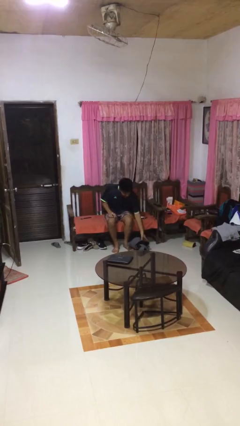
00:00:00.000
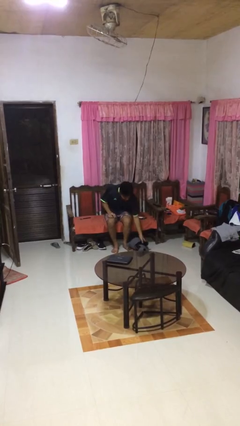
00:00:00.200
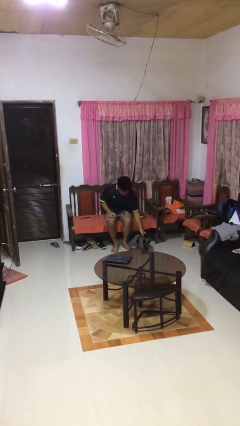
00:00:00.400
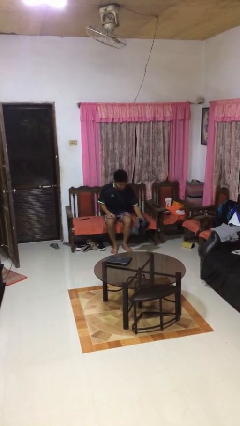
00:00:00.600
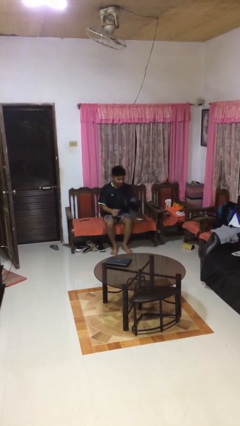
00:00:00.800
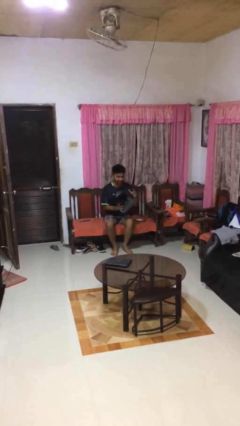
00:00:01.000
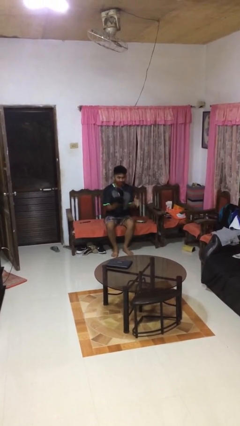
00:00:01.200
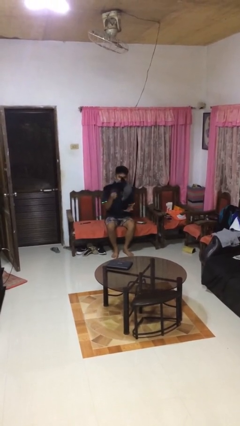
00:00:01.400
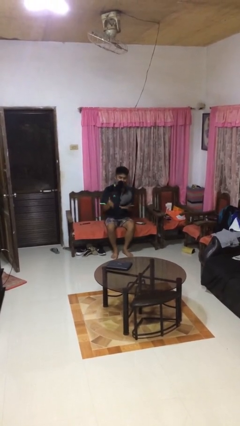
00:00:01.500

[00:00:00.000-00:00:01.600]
person picks up object from floor

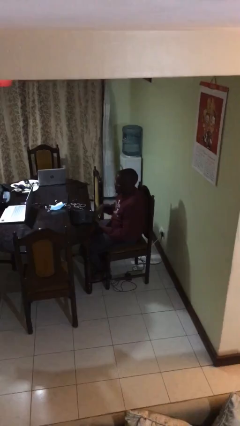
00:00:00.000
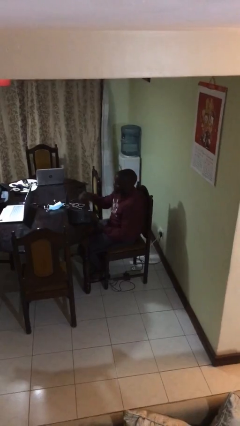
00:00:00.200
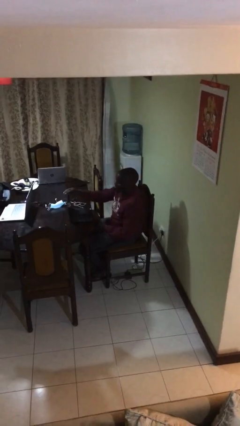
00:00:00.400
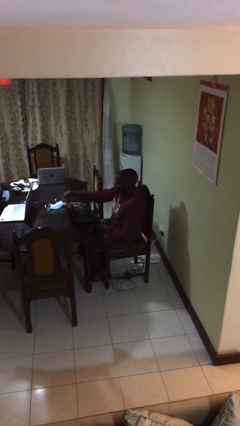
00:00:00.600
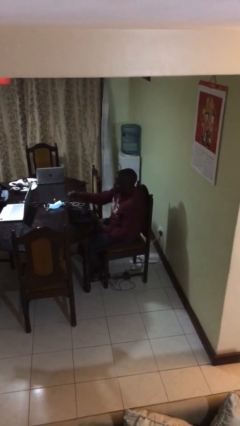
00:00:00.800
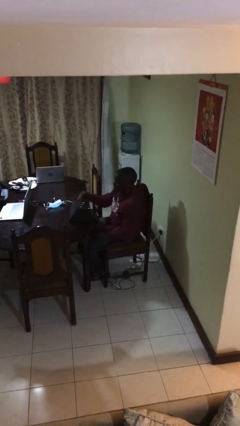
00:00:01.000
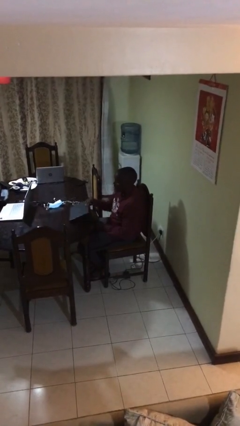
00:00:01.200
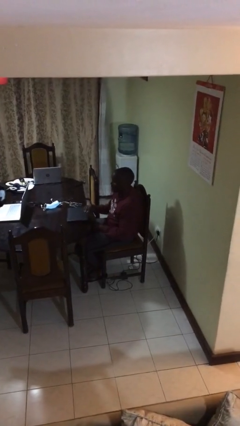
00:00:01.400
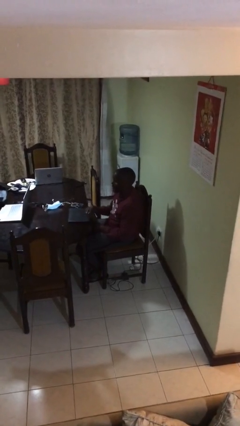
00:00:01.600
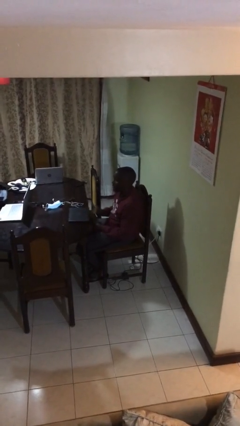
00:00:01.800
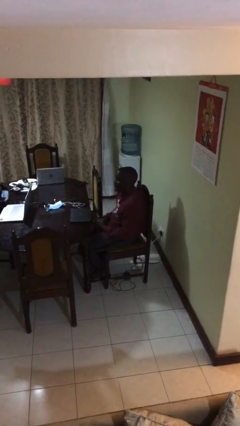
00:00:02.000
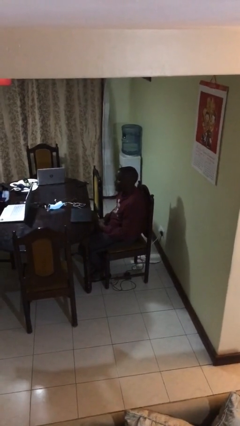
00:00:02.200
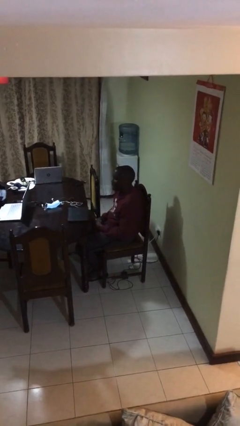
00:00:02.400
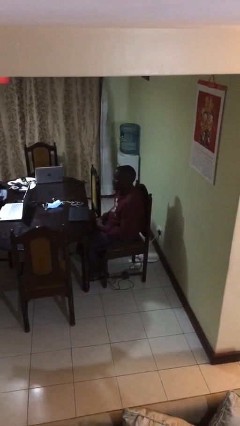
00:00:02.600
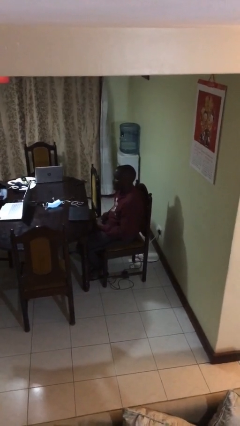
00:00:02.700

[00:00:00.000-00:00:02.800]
person closes laptop

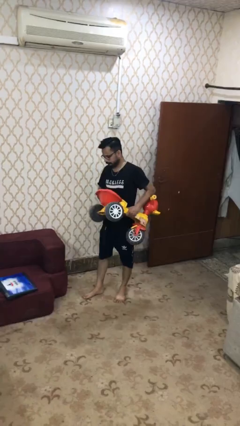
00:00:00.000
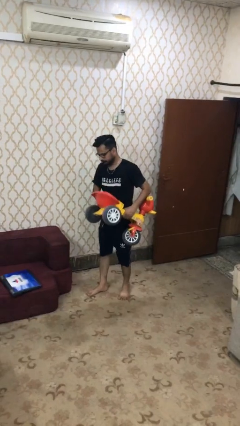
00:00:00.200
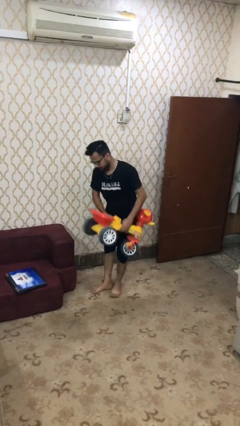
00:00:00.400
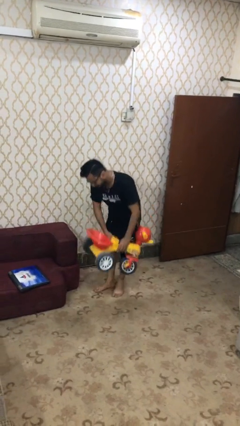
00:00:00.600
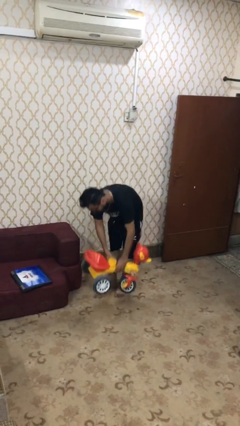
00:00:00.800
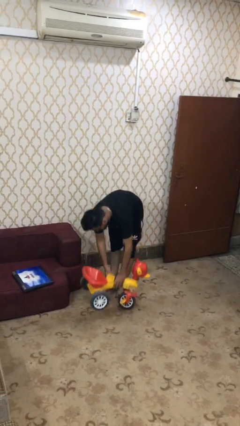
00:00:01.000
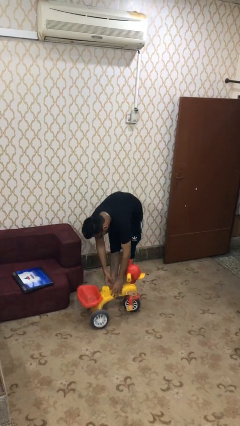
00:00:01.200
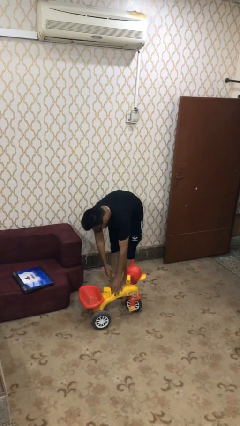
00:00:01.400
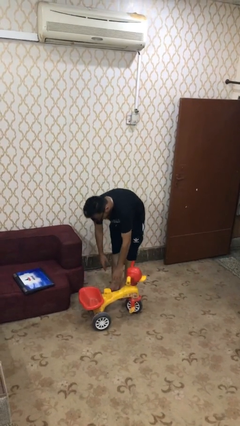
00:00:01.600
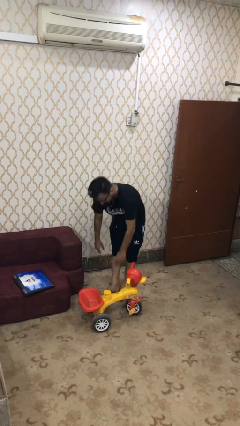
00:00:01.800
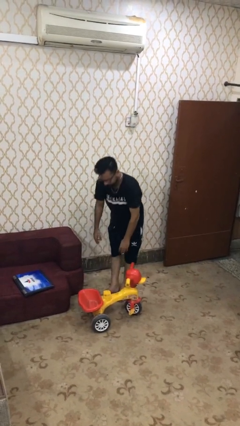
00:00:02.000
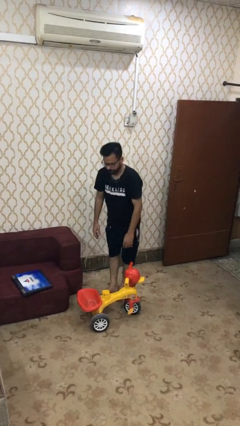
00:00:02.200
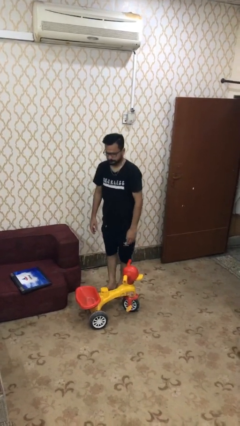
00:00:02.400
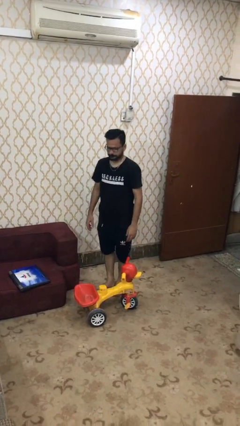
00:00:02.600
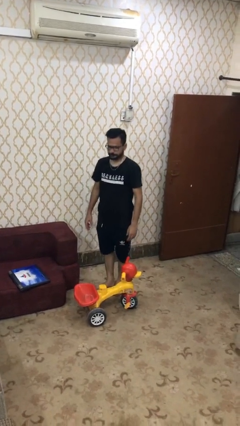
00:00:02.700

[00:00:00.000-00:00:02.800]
person puts down object on floor

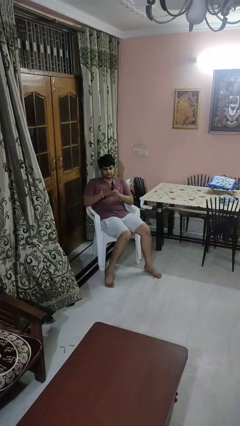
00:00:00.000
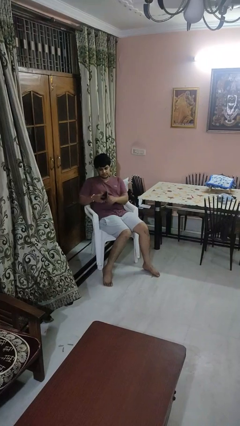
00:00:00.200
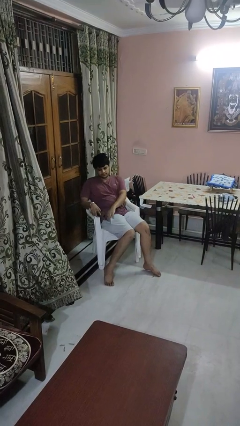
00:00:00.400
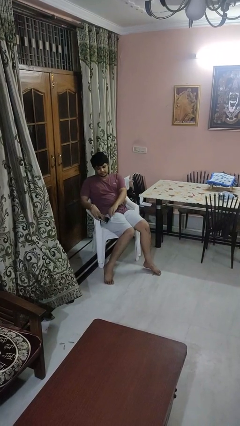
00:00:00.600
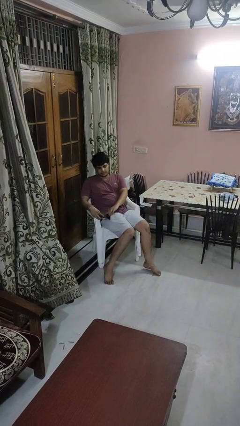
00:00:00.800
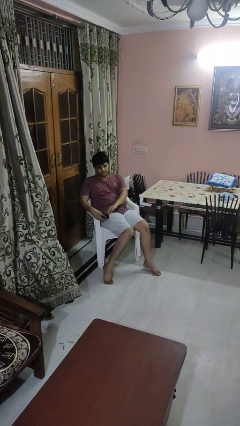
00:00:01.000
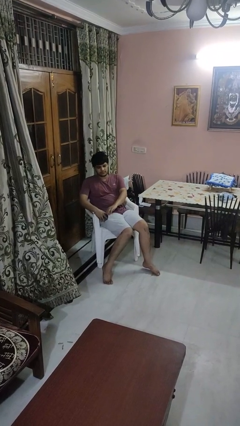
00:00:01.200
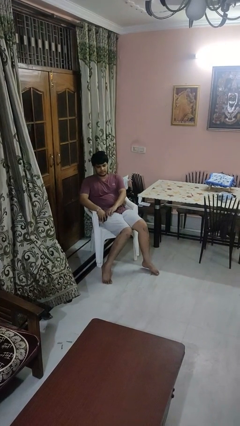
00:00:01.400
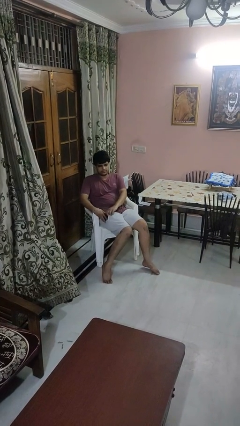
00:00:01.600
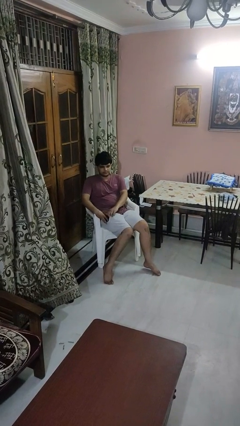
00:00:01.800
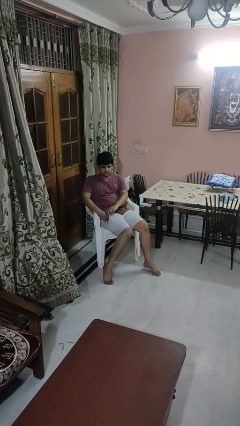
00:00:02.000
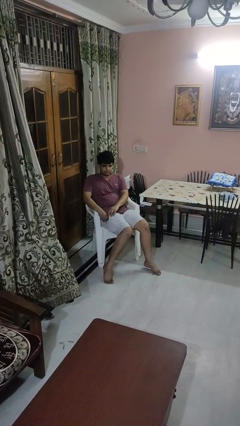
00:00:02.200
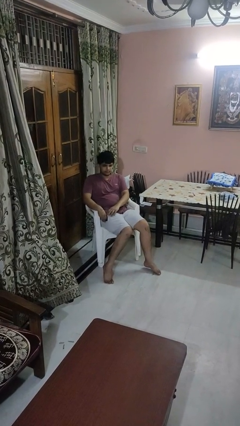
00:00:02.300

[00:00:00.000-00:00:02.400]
person puts phone into pocket

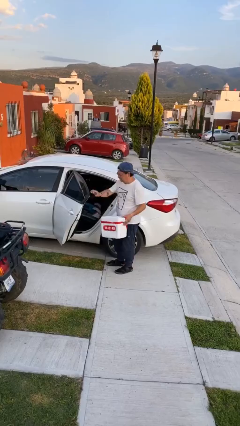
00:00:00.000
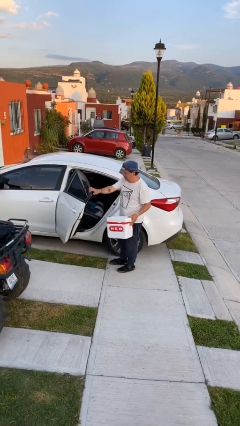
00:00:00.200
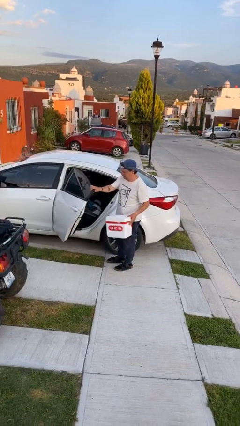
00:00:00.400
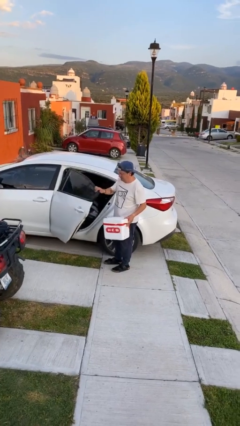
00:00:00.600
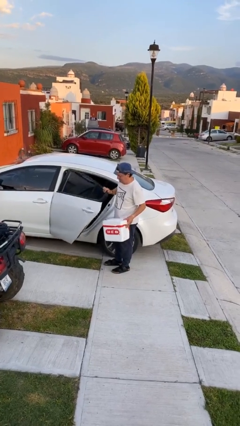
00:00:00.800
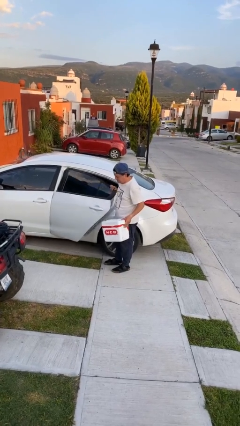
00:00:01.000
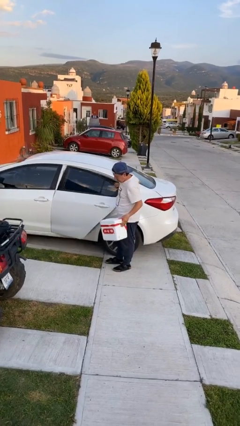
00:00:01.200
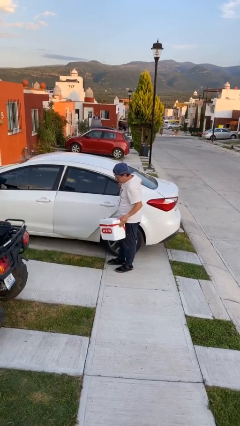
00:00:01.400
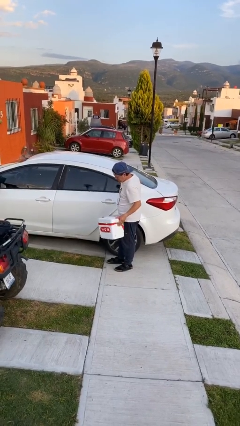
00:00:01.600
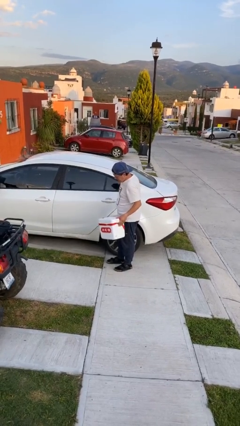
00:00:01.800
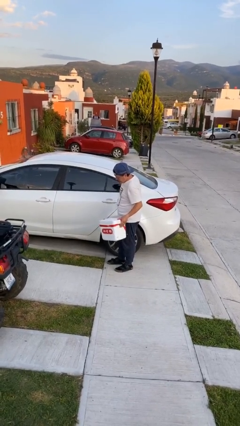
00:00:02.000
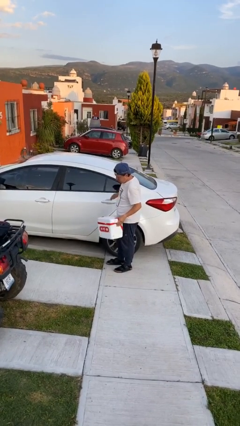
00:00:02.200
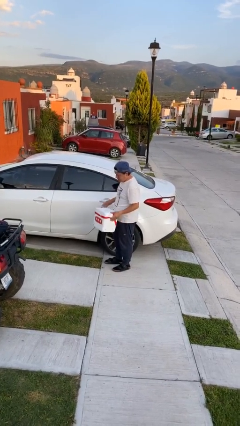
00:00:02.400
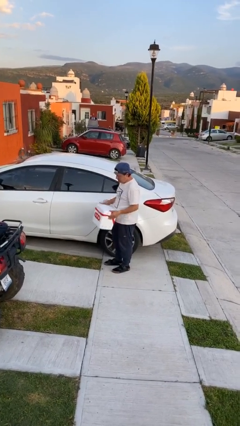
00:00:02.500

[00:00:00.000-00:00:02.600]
person closes car door

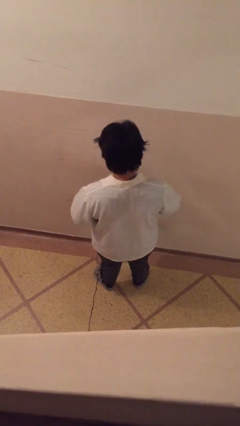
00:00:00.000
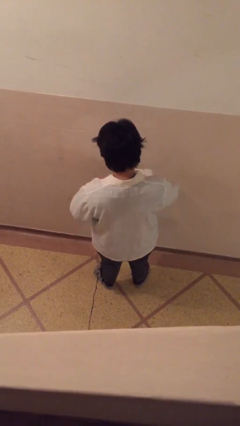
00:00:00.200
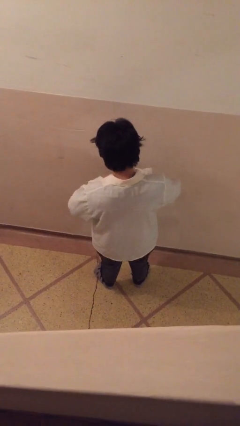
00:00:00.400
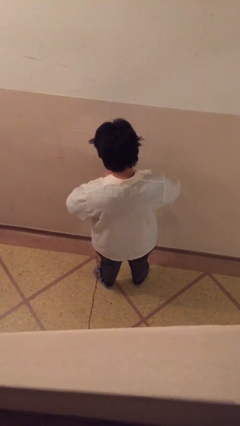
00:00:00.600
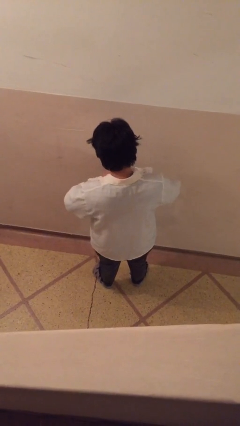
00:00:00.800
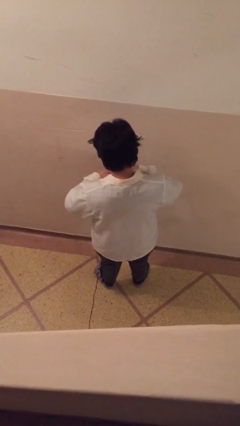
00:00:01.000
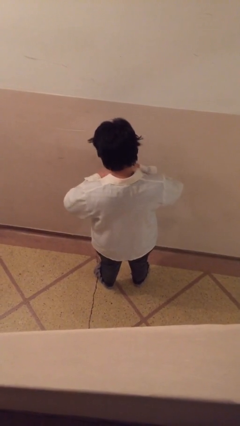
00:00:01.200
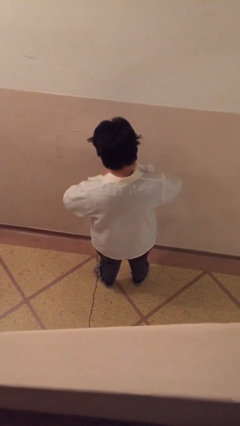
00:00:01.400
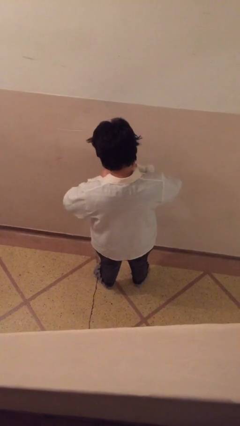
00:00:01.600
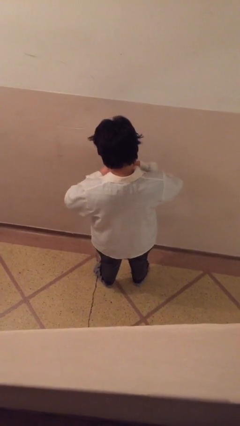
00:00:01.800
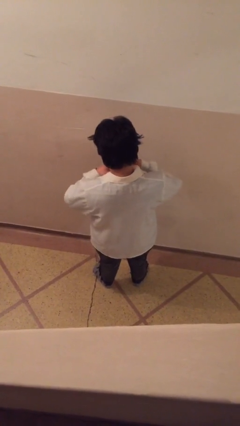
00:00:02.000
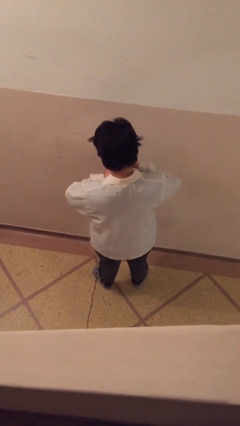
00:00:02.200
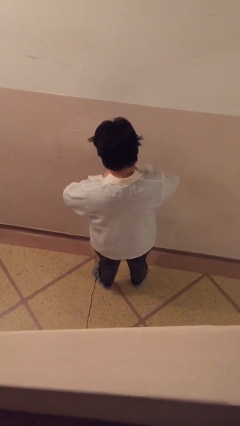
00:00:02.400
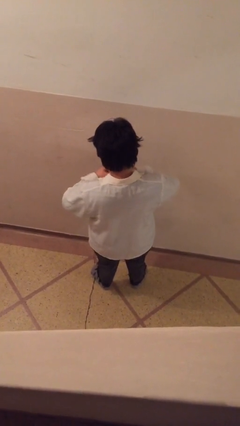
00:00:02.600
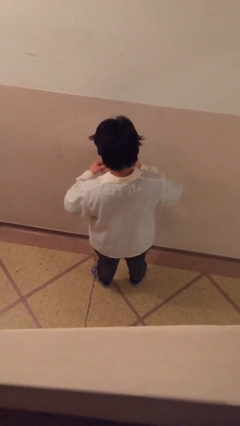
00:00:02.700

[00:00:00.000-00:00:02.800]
person buttons shirt

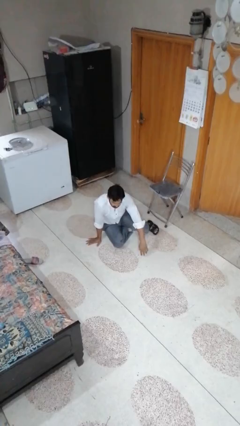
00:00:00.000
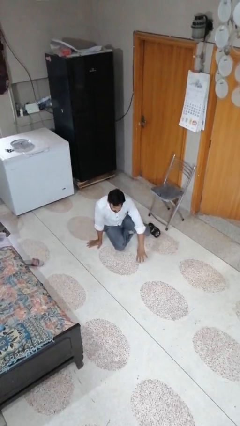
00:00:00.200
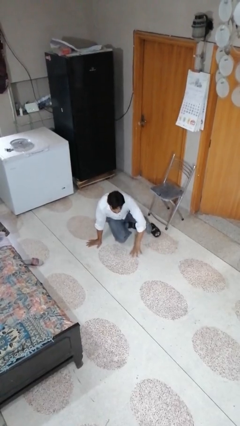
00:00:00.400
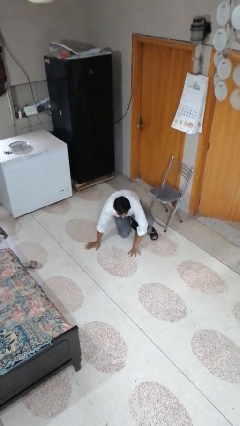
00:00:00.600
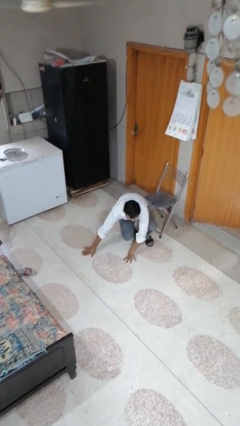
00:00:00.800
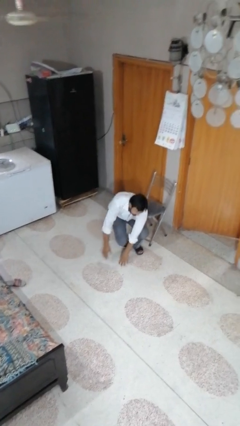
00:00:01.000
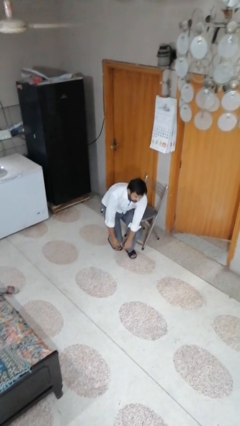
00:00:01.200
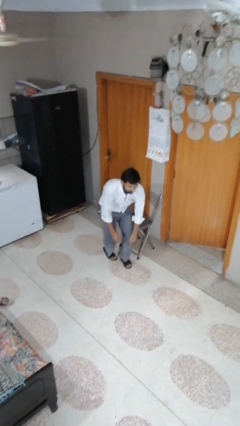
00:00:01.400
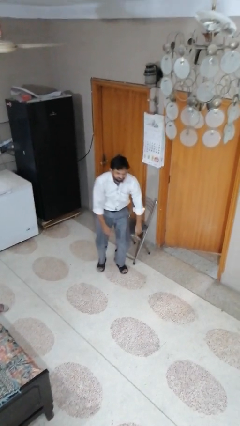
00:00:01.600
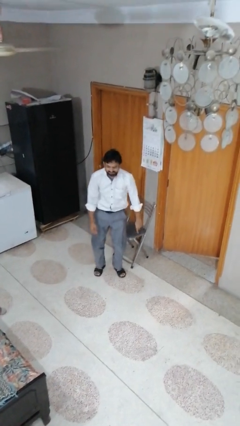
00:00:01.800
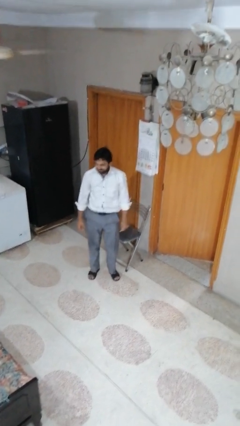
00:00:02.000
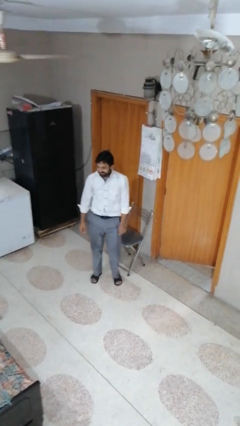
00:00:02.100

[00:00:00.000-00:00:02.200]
person stands up from floor

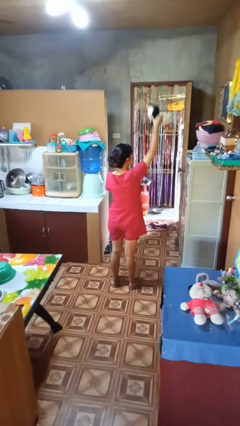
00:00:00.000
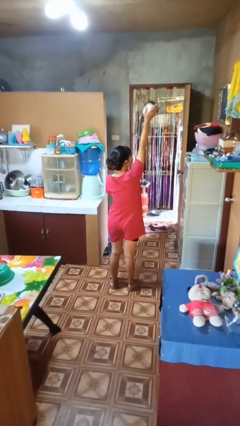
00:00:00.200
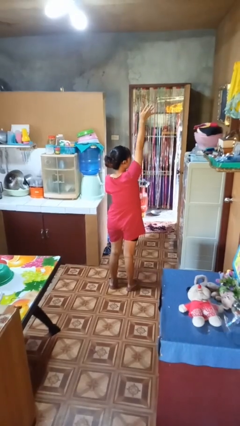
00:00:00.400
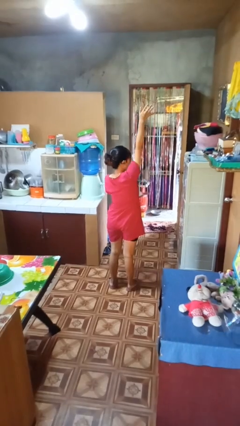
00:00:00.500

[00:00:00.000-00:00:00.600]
person drops object
